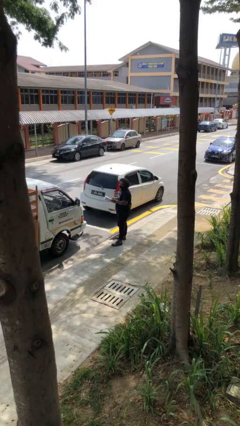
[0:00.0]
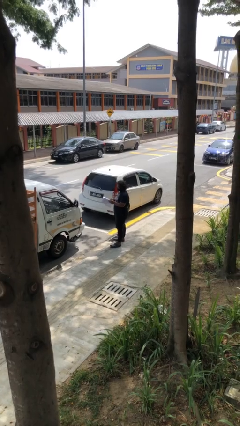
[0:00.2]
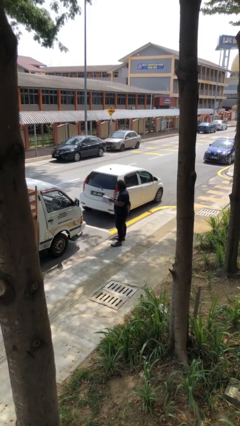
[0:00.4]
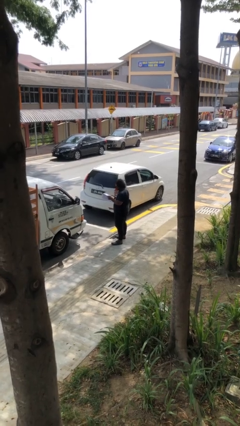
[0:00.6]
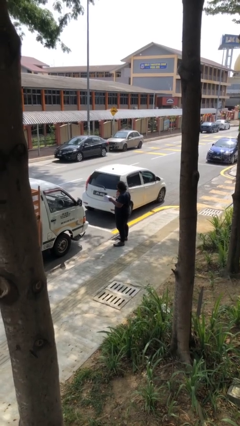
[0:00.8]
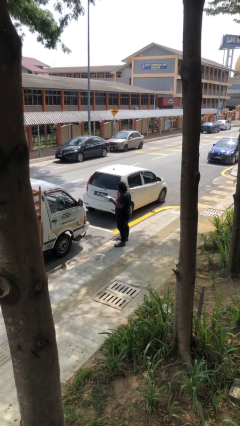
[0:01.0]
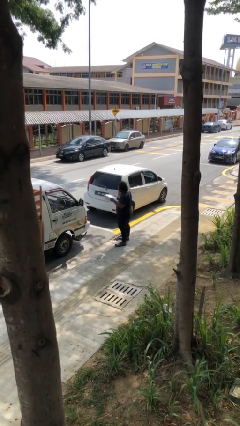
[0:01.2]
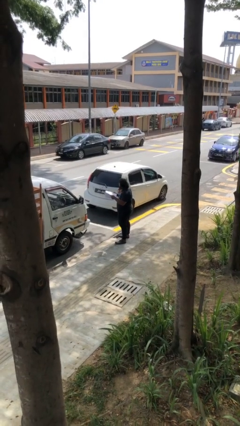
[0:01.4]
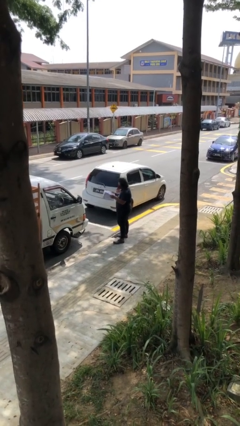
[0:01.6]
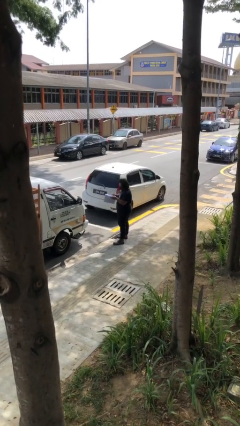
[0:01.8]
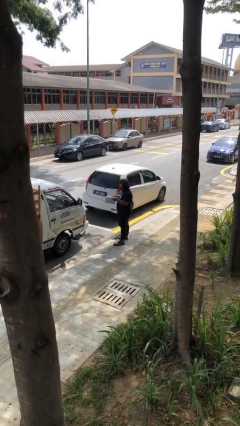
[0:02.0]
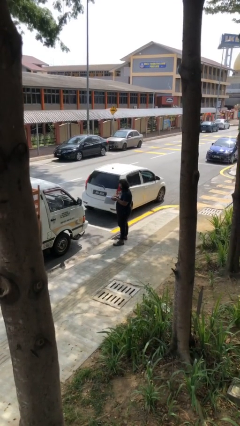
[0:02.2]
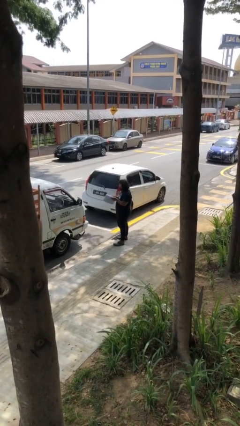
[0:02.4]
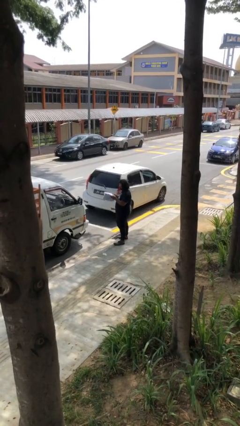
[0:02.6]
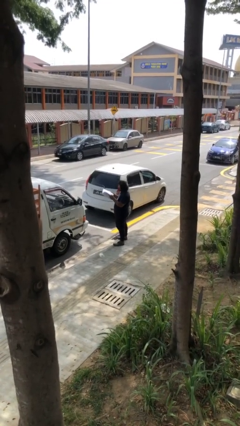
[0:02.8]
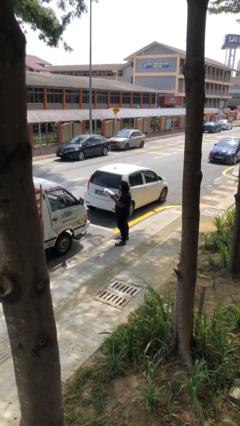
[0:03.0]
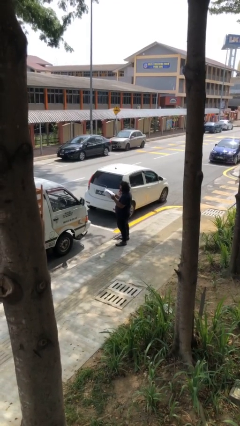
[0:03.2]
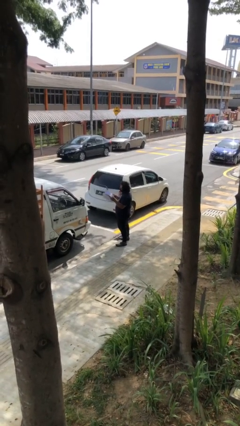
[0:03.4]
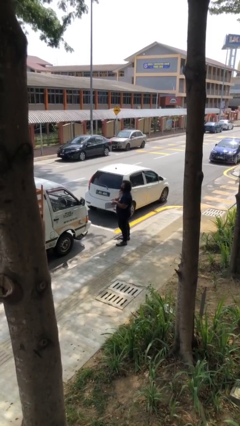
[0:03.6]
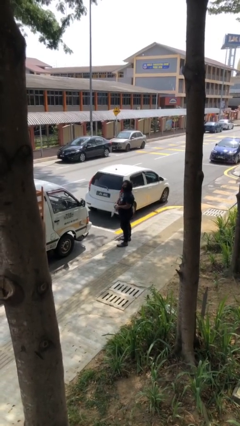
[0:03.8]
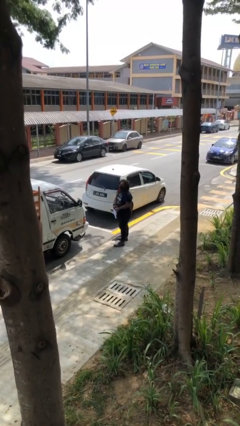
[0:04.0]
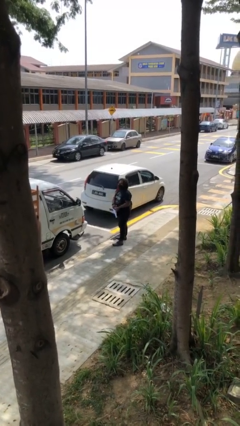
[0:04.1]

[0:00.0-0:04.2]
person reads document

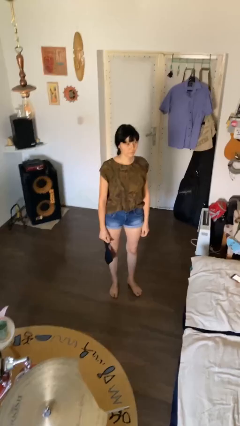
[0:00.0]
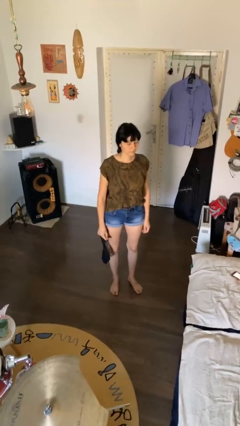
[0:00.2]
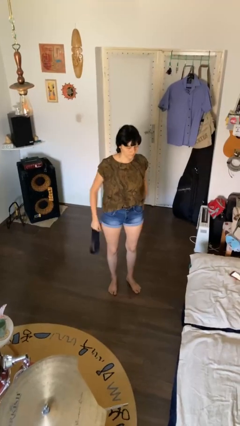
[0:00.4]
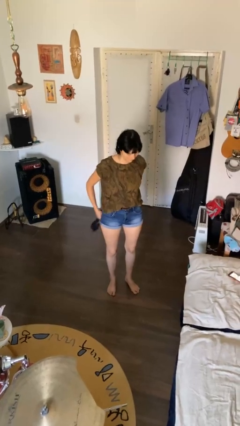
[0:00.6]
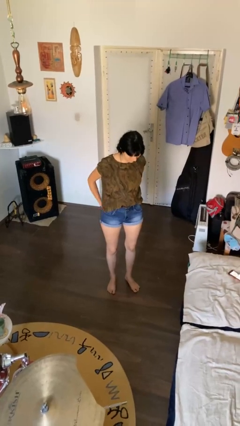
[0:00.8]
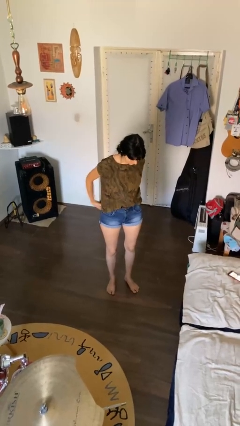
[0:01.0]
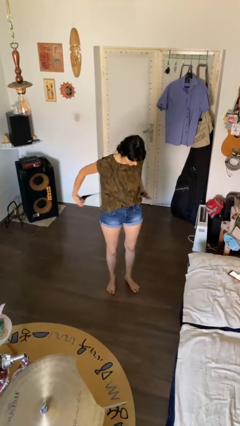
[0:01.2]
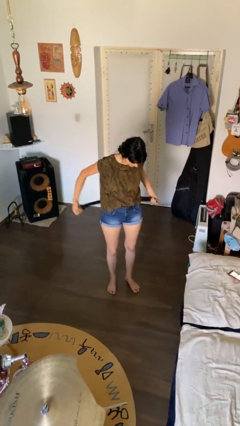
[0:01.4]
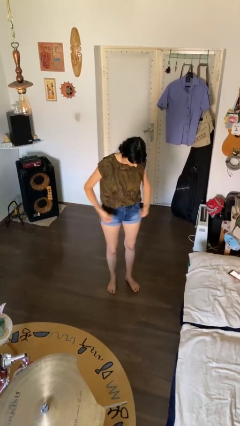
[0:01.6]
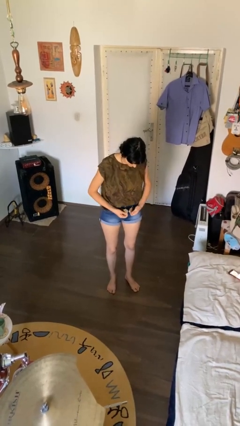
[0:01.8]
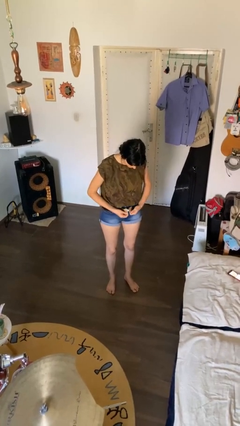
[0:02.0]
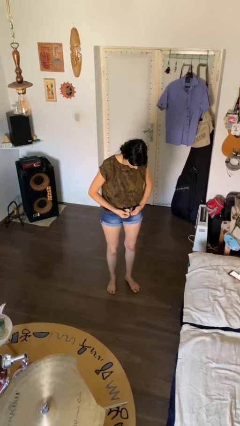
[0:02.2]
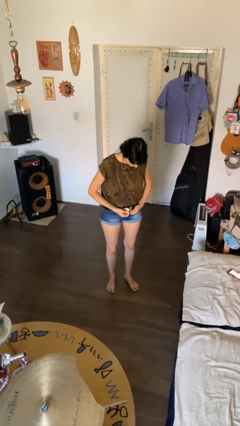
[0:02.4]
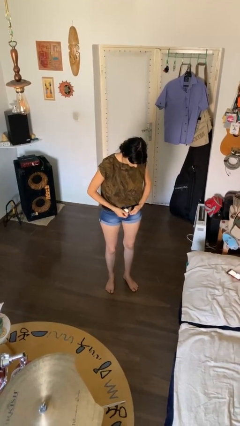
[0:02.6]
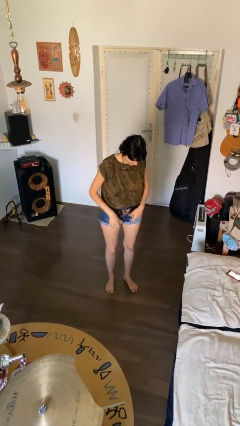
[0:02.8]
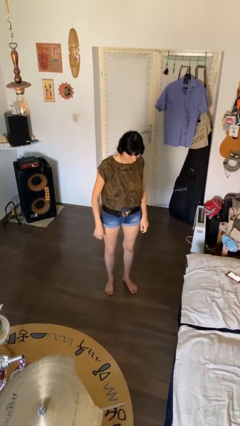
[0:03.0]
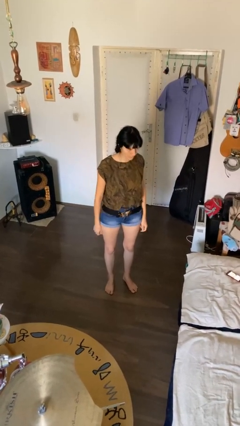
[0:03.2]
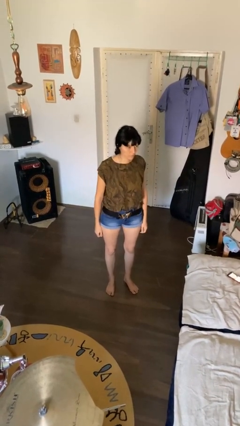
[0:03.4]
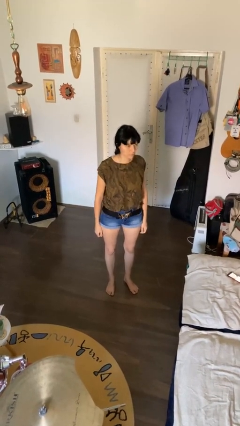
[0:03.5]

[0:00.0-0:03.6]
person puts on belt

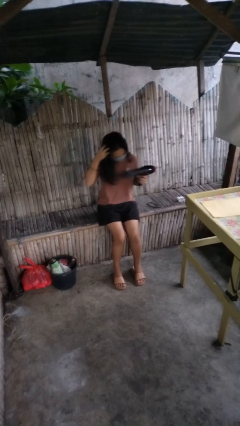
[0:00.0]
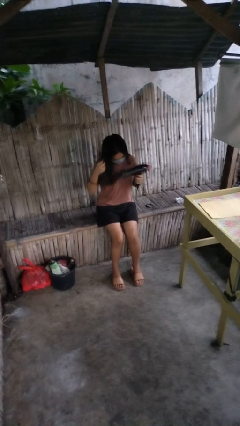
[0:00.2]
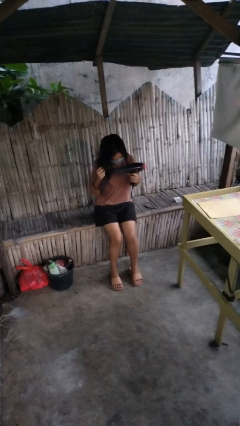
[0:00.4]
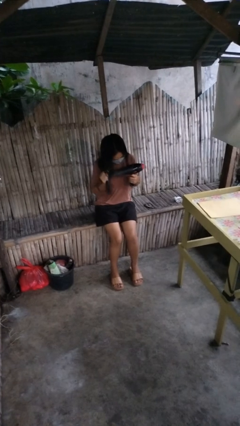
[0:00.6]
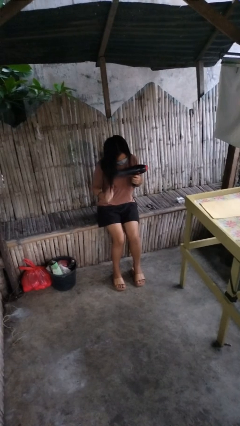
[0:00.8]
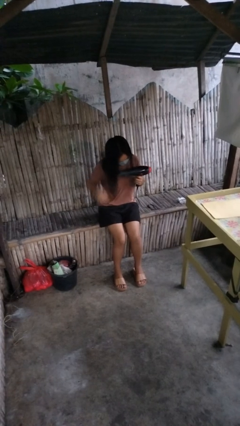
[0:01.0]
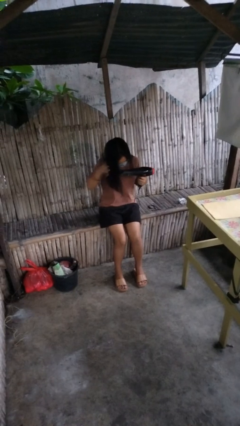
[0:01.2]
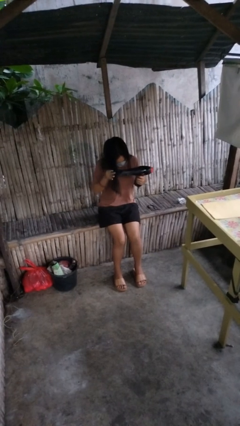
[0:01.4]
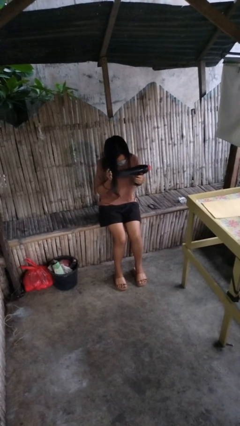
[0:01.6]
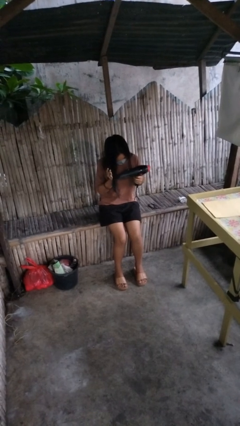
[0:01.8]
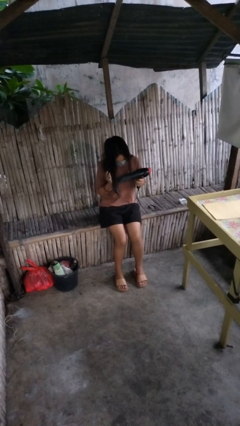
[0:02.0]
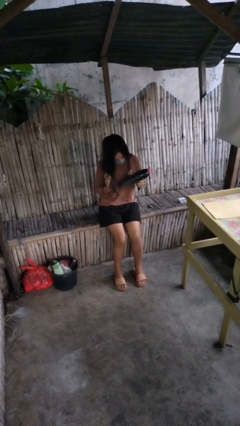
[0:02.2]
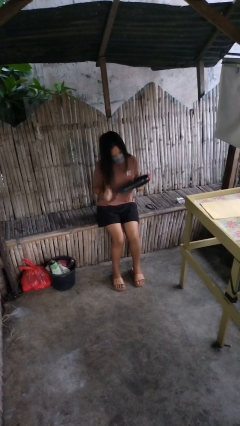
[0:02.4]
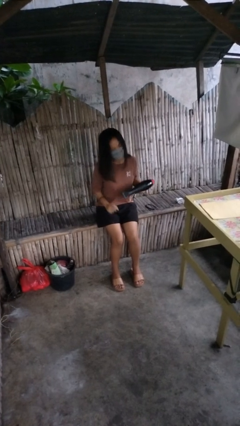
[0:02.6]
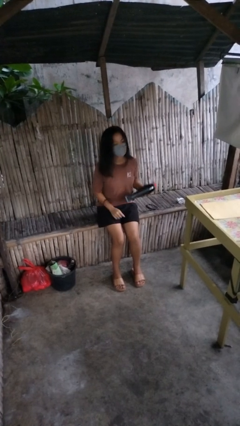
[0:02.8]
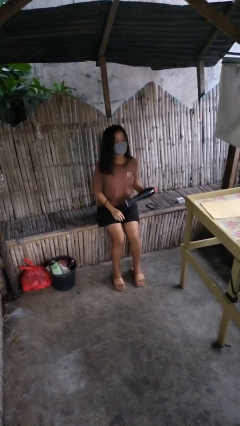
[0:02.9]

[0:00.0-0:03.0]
person dries hair with hairdryer

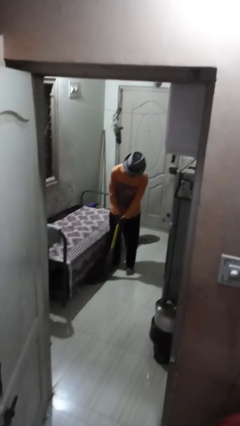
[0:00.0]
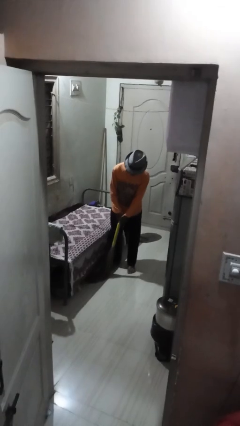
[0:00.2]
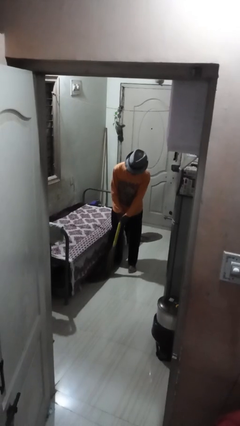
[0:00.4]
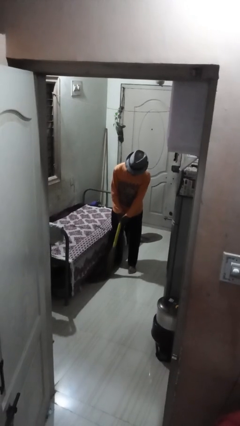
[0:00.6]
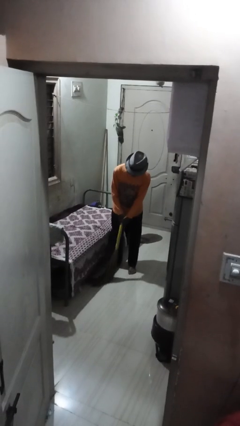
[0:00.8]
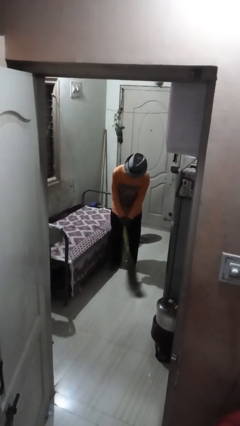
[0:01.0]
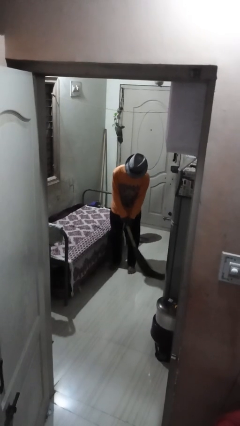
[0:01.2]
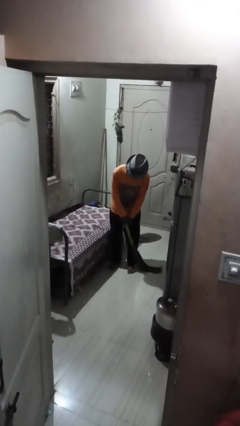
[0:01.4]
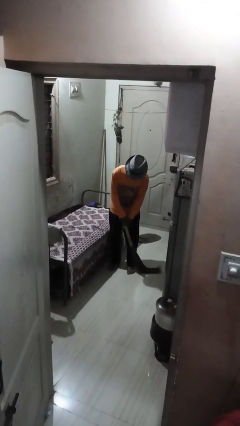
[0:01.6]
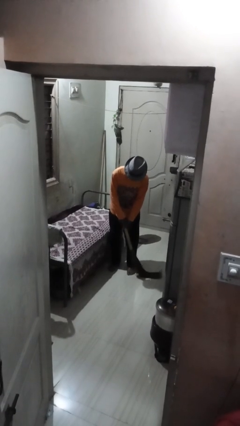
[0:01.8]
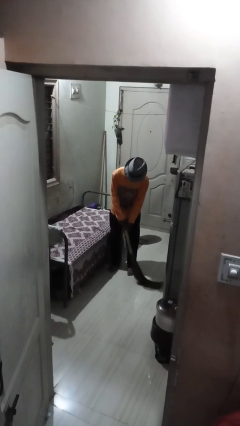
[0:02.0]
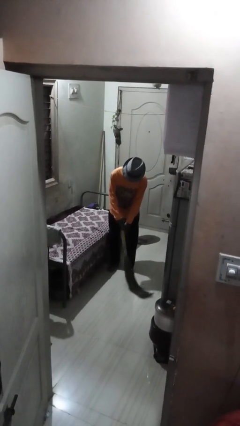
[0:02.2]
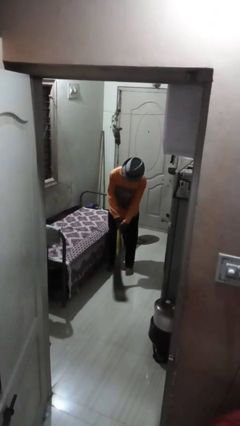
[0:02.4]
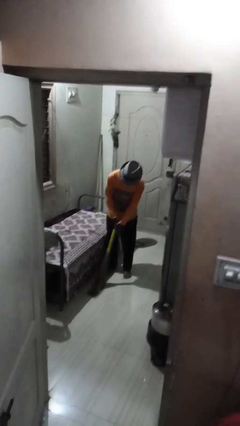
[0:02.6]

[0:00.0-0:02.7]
person sweeps floor

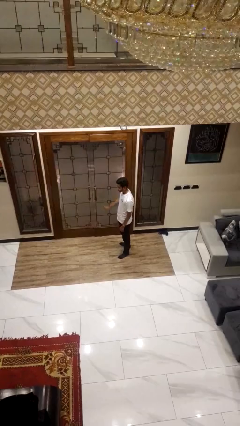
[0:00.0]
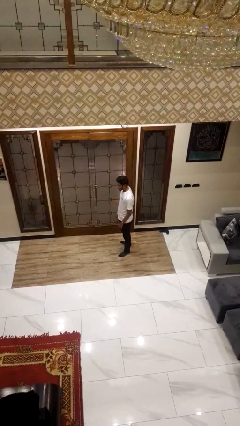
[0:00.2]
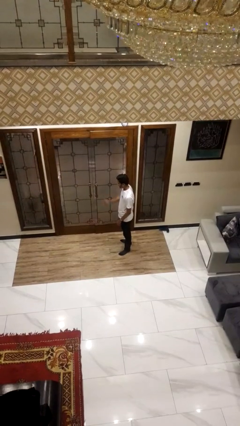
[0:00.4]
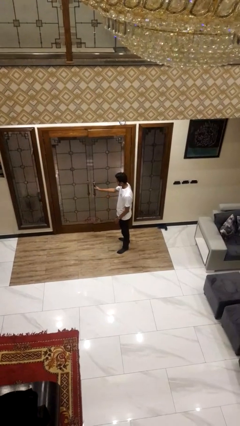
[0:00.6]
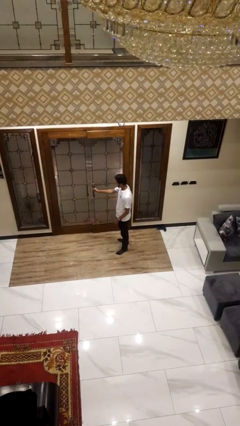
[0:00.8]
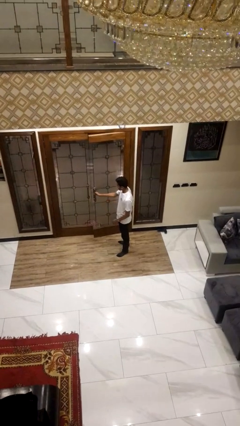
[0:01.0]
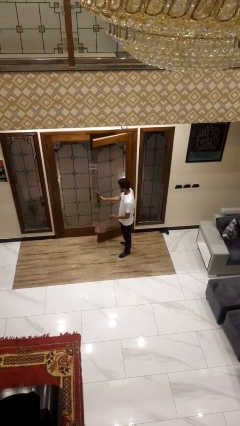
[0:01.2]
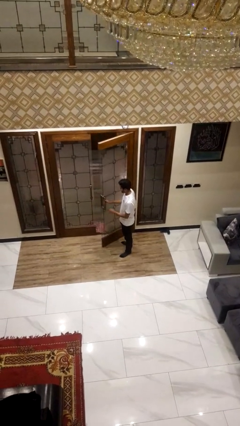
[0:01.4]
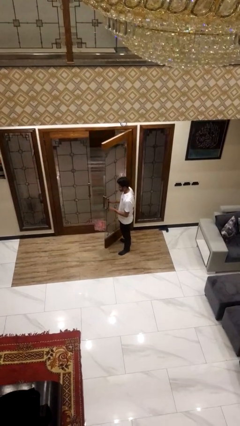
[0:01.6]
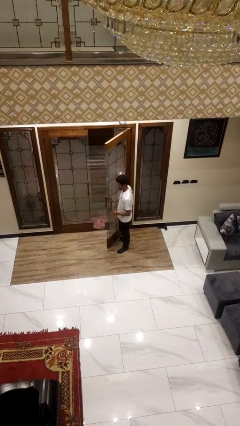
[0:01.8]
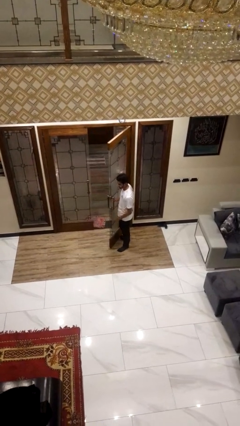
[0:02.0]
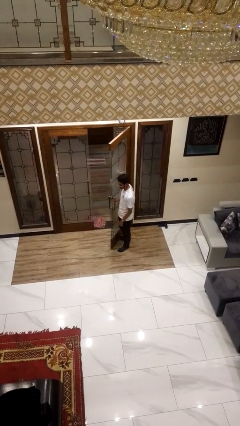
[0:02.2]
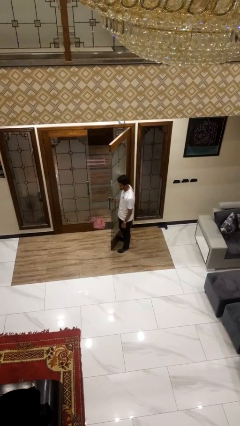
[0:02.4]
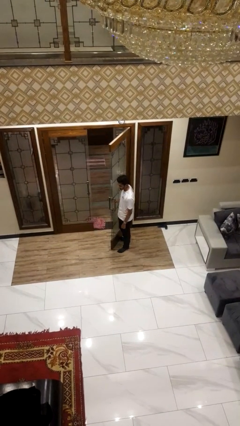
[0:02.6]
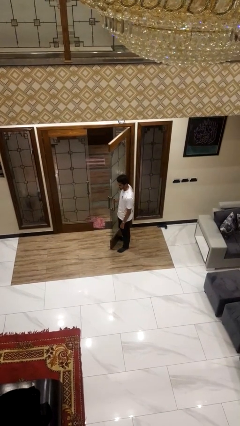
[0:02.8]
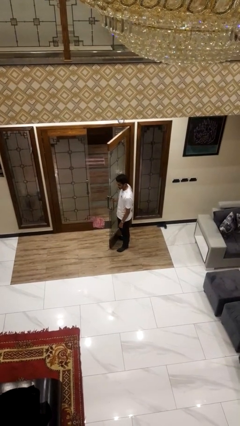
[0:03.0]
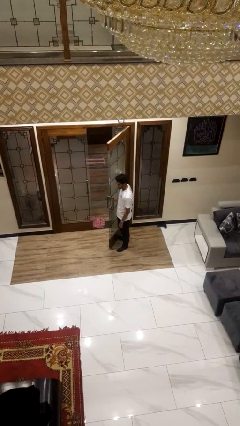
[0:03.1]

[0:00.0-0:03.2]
person opens facility door

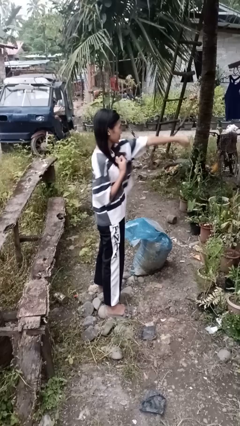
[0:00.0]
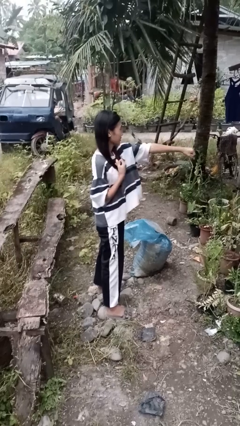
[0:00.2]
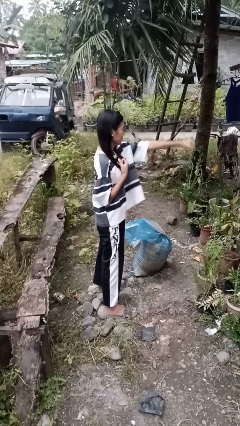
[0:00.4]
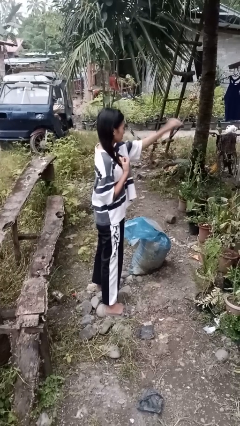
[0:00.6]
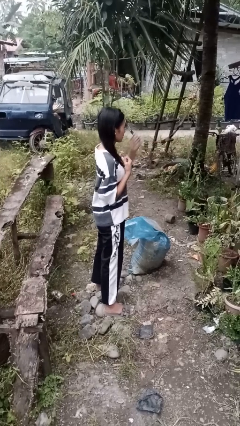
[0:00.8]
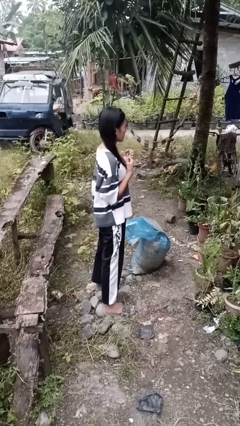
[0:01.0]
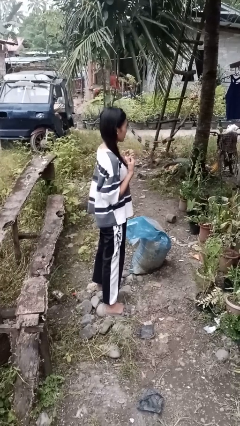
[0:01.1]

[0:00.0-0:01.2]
person punches
